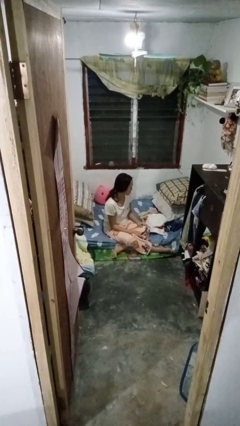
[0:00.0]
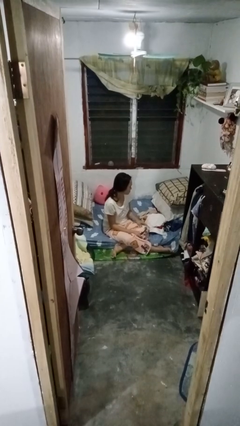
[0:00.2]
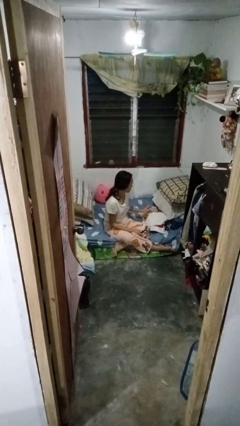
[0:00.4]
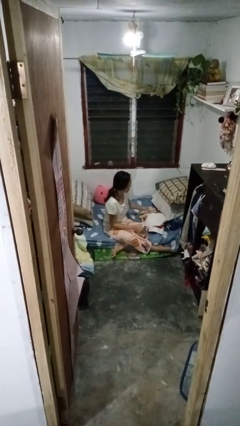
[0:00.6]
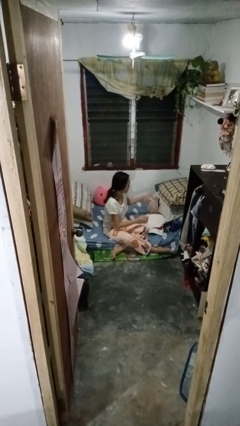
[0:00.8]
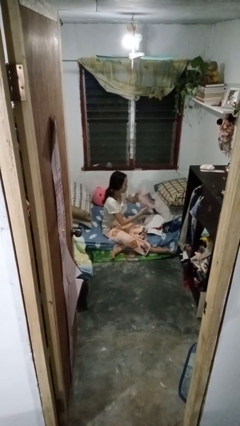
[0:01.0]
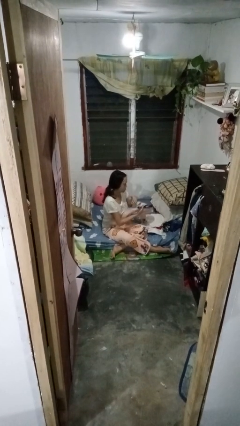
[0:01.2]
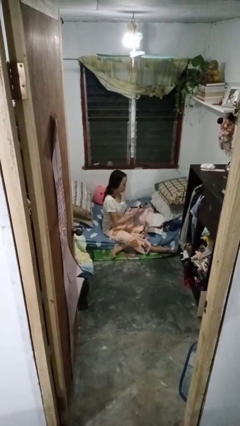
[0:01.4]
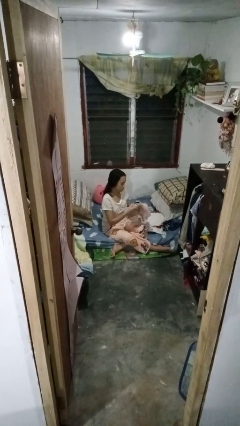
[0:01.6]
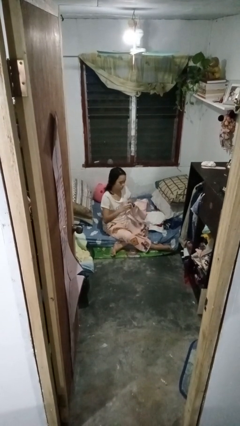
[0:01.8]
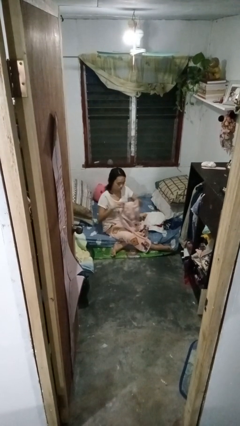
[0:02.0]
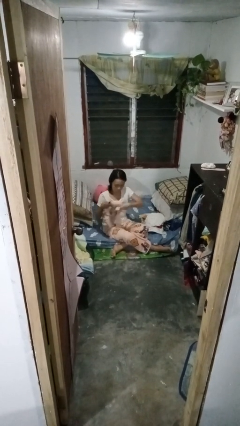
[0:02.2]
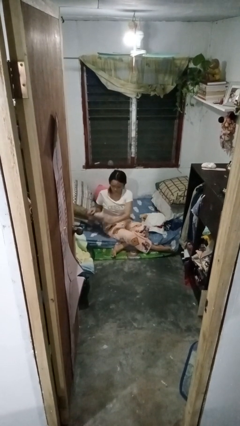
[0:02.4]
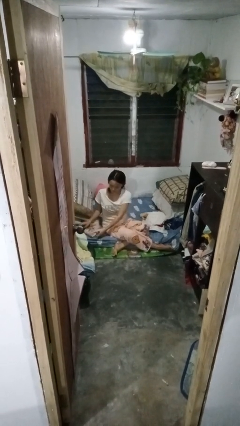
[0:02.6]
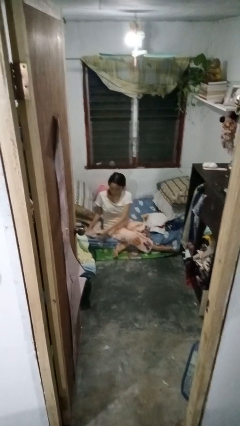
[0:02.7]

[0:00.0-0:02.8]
person folds shirt

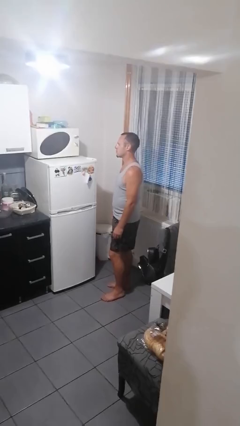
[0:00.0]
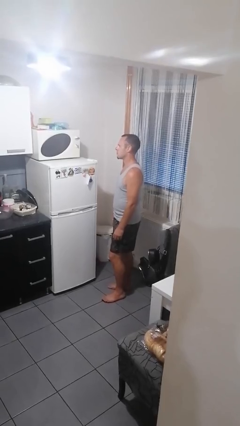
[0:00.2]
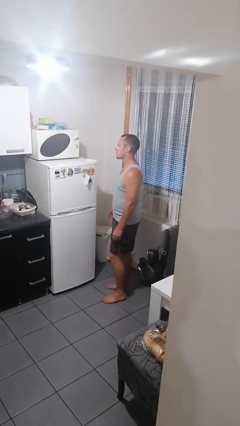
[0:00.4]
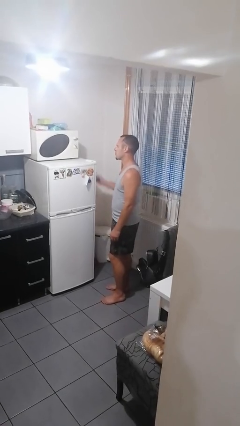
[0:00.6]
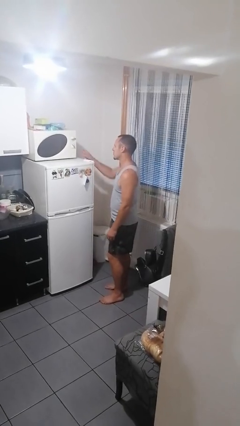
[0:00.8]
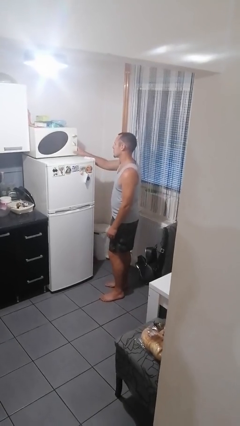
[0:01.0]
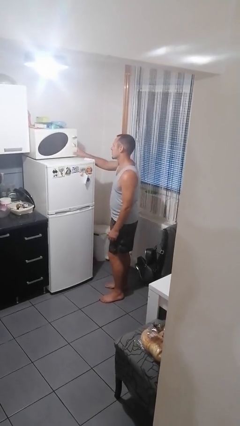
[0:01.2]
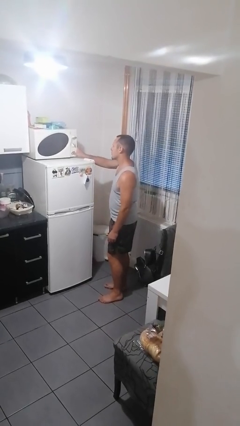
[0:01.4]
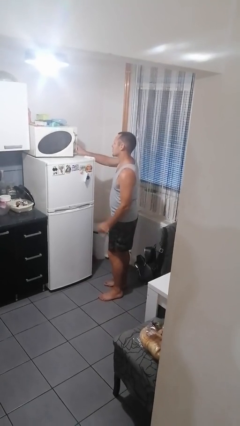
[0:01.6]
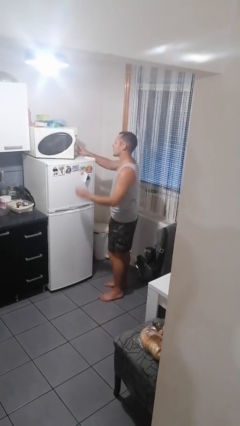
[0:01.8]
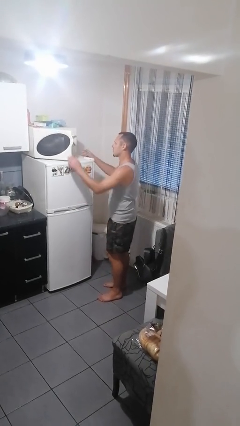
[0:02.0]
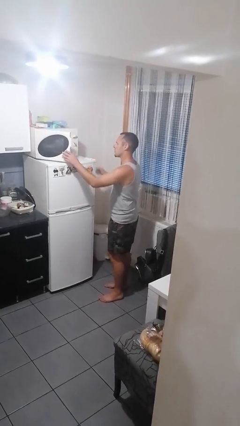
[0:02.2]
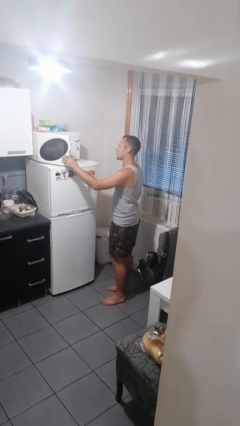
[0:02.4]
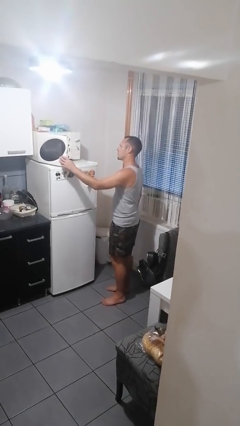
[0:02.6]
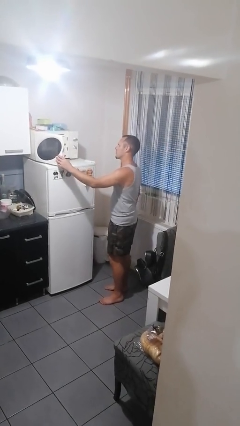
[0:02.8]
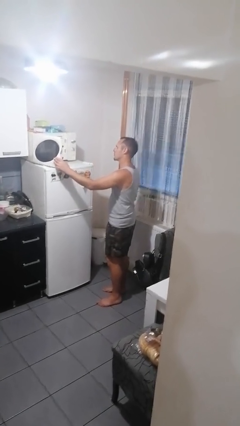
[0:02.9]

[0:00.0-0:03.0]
person opens microwave

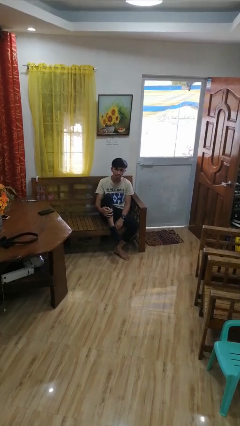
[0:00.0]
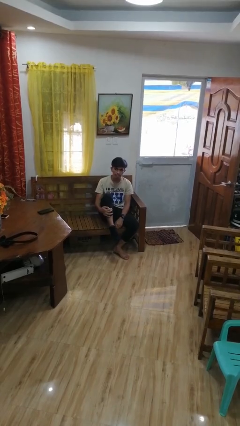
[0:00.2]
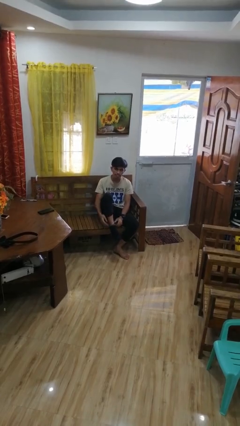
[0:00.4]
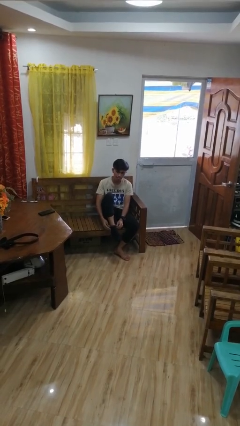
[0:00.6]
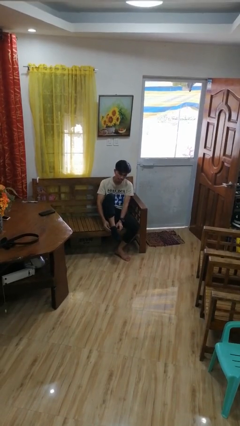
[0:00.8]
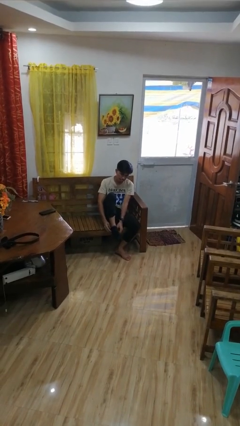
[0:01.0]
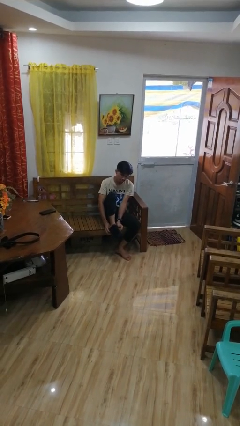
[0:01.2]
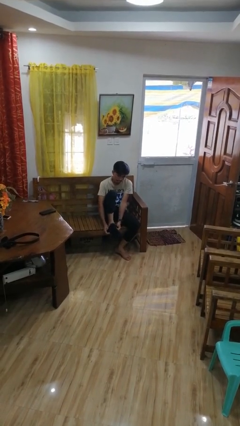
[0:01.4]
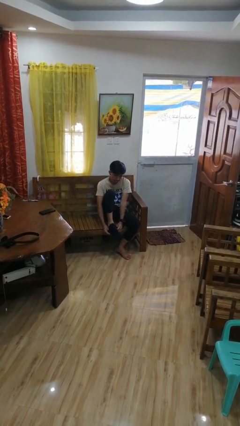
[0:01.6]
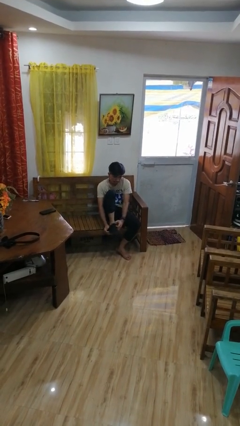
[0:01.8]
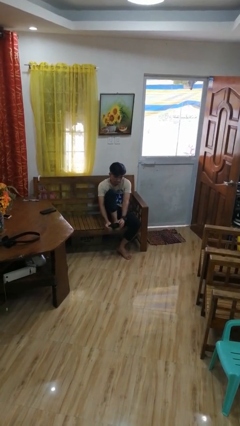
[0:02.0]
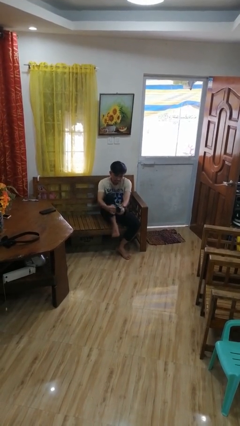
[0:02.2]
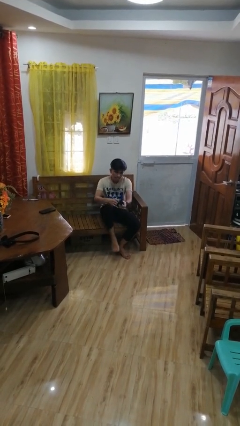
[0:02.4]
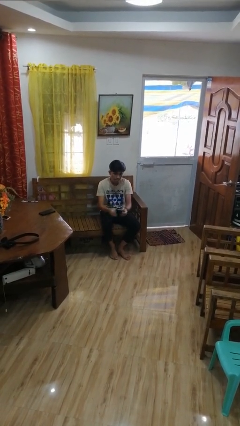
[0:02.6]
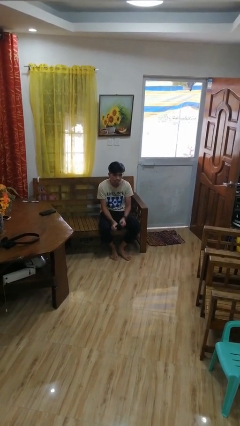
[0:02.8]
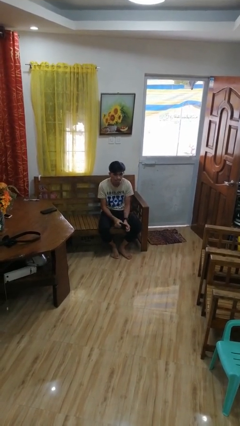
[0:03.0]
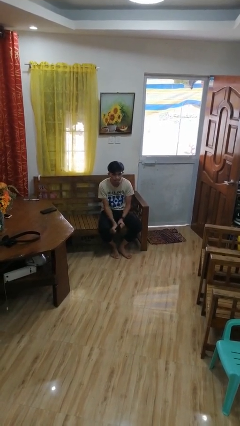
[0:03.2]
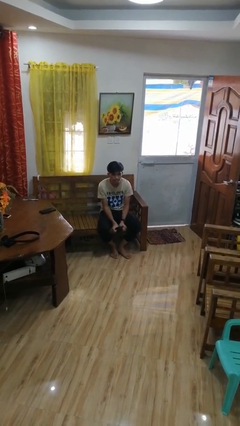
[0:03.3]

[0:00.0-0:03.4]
person takes off socks

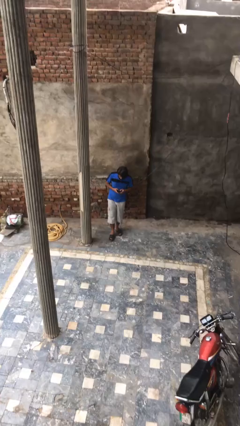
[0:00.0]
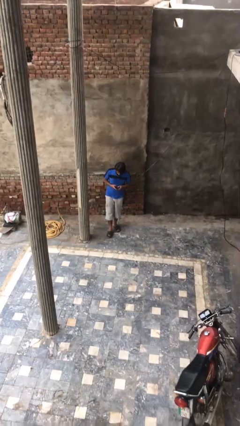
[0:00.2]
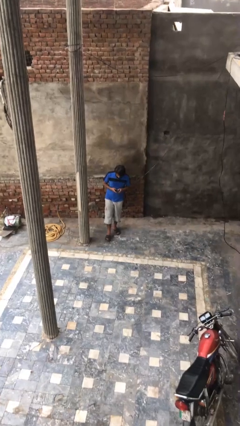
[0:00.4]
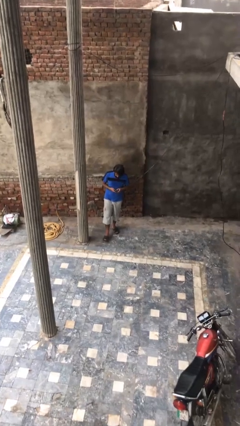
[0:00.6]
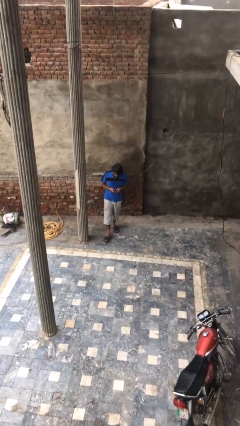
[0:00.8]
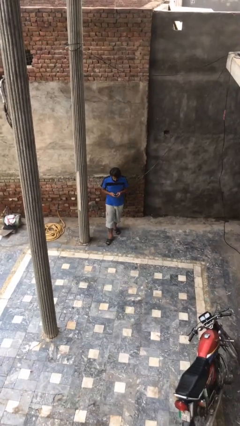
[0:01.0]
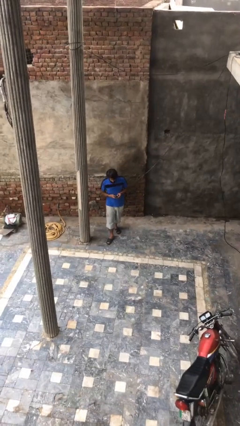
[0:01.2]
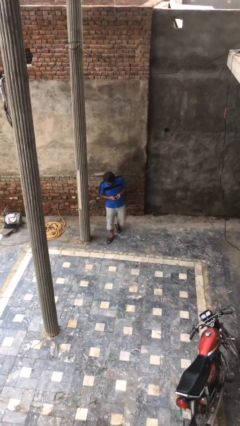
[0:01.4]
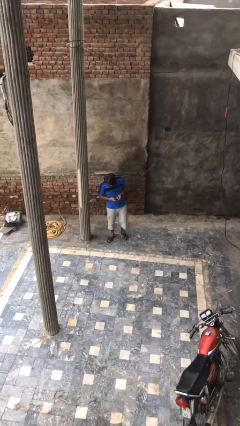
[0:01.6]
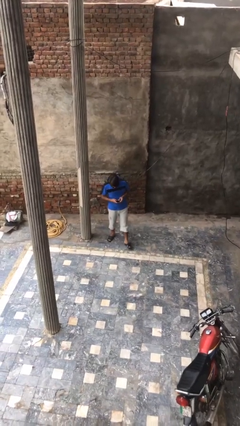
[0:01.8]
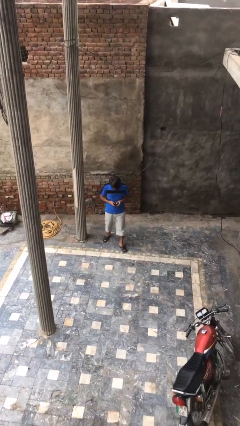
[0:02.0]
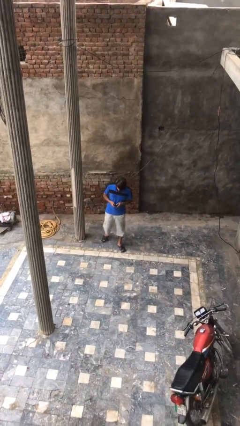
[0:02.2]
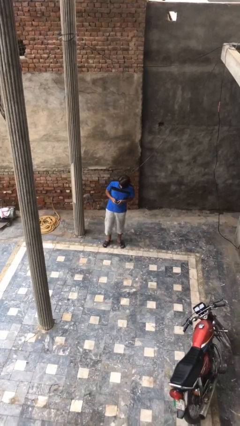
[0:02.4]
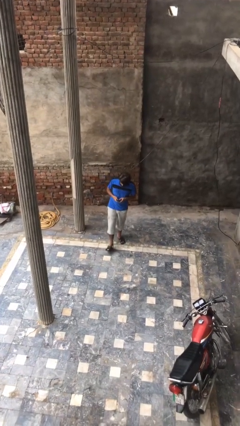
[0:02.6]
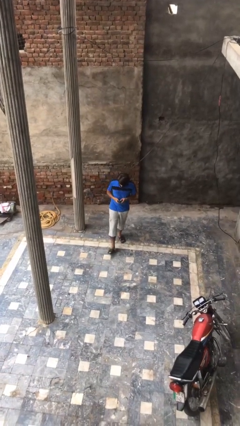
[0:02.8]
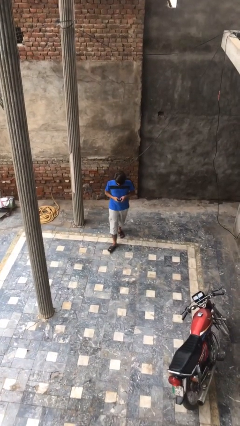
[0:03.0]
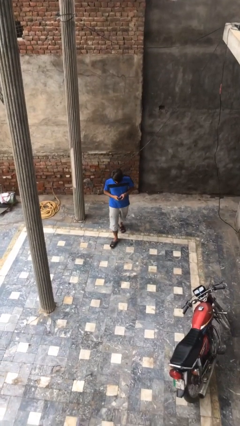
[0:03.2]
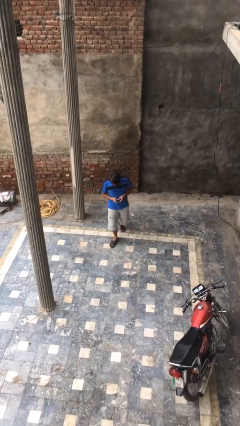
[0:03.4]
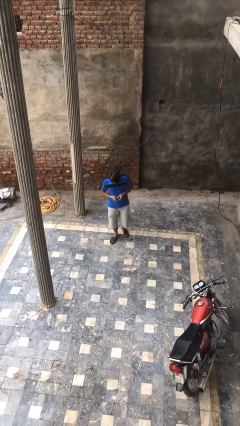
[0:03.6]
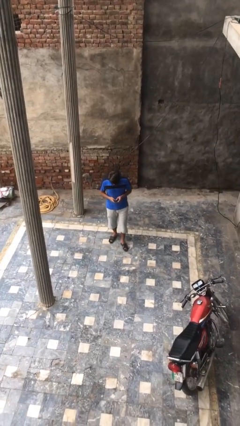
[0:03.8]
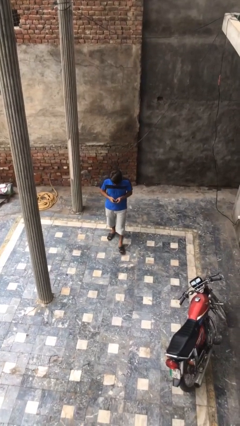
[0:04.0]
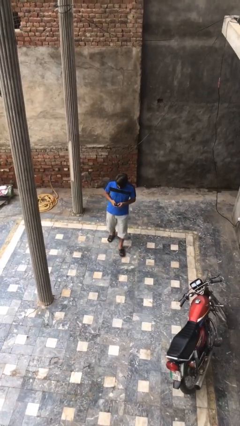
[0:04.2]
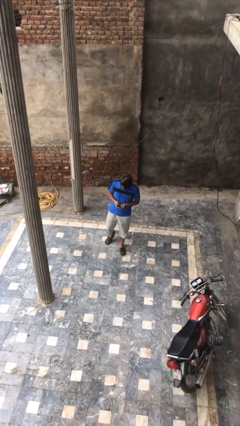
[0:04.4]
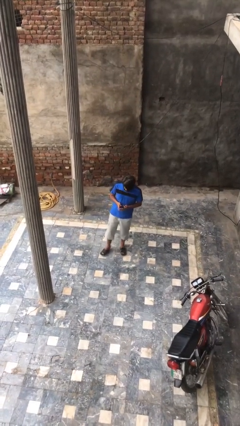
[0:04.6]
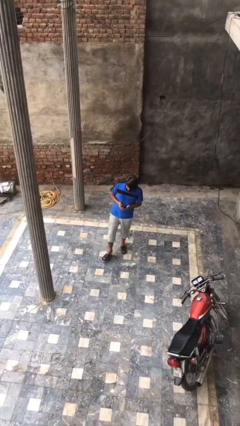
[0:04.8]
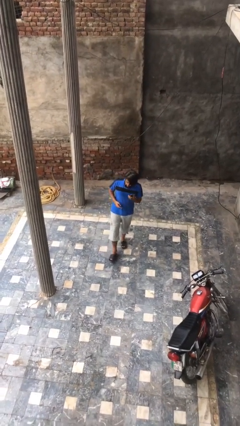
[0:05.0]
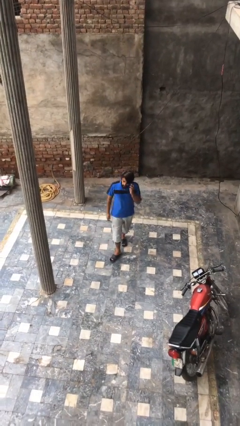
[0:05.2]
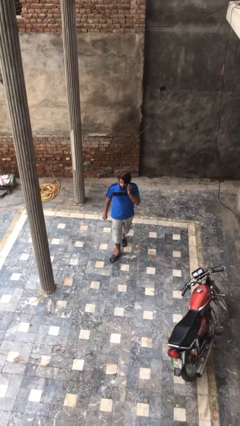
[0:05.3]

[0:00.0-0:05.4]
person texts on phone

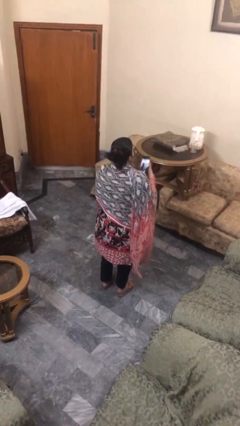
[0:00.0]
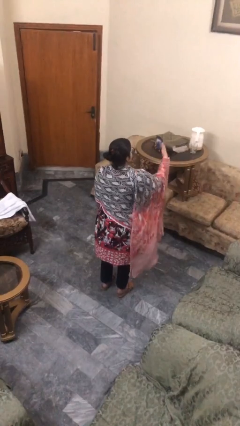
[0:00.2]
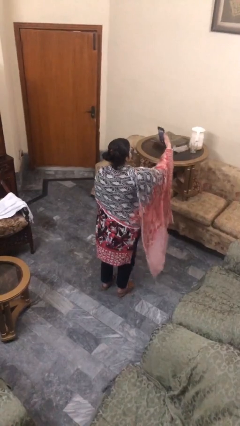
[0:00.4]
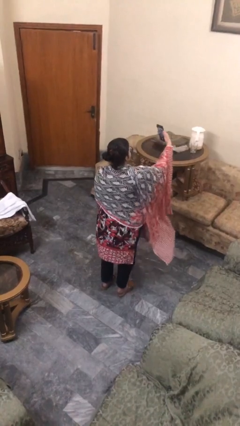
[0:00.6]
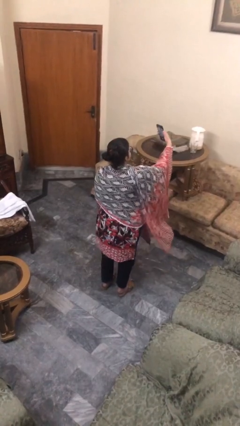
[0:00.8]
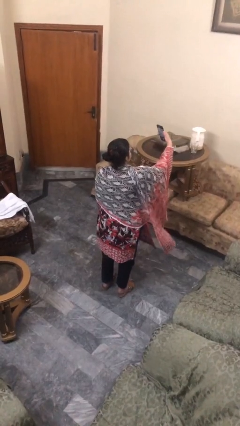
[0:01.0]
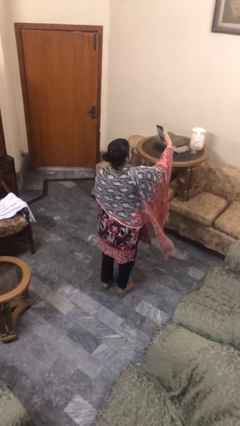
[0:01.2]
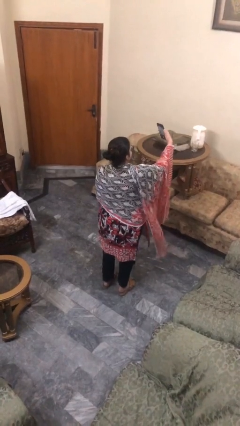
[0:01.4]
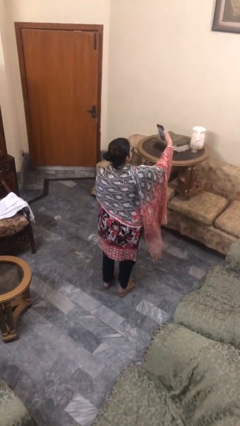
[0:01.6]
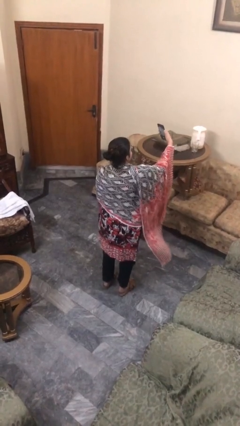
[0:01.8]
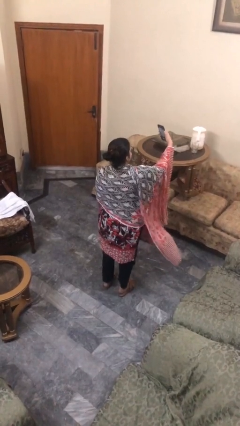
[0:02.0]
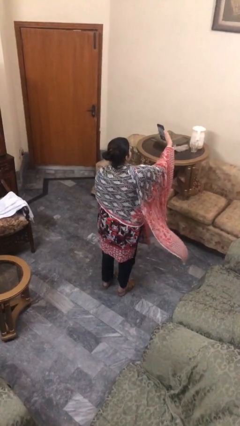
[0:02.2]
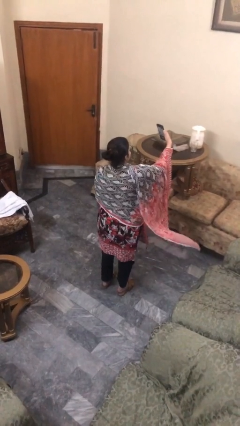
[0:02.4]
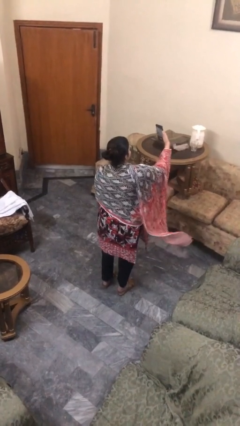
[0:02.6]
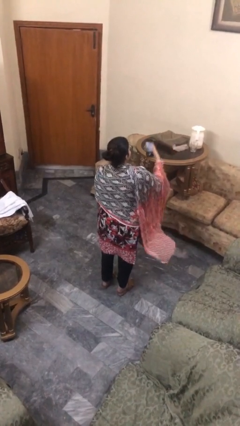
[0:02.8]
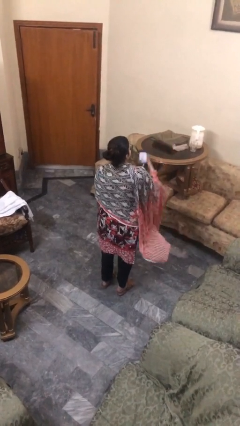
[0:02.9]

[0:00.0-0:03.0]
person takes selfie
